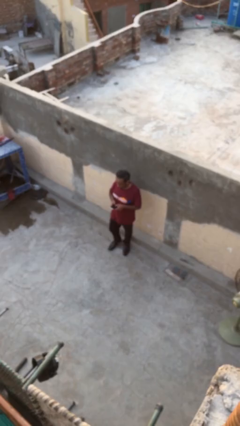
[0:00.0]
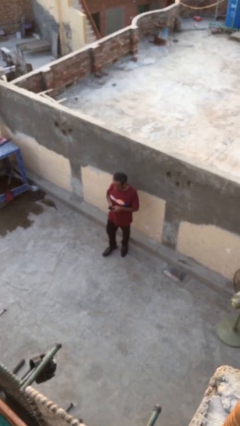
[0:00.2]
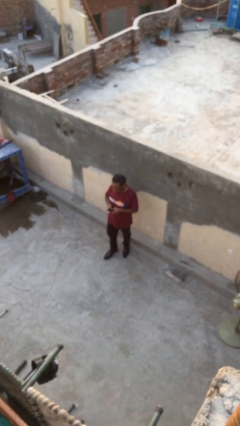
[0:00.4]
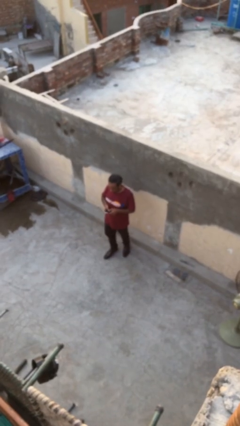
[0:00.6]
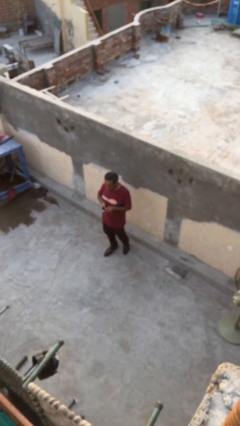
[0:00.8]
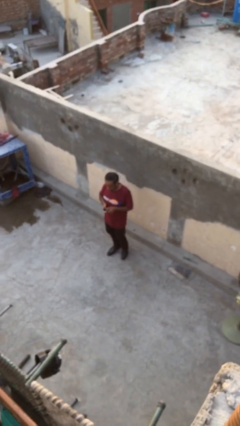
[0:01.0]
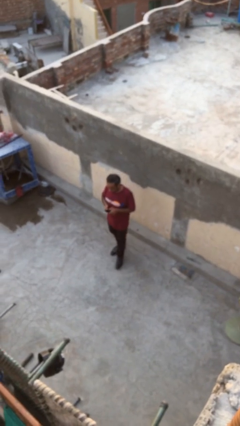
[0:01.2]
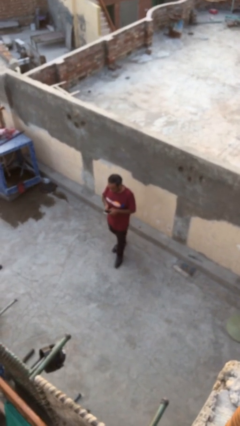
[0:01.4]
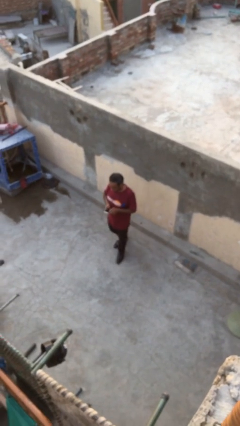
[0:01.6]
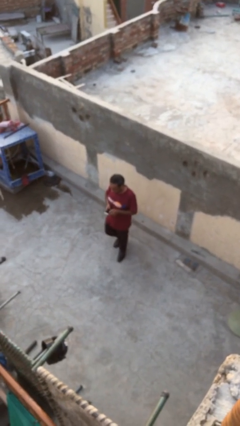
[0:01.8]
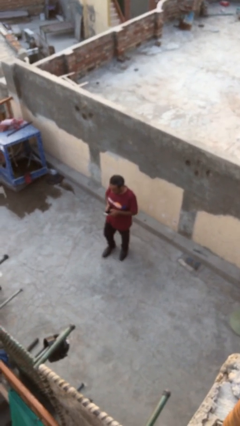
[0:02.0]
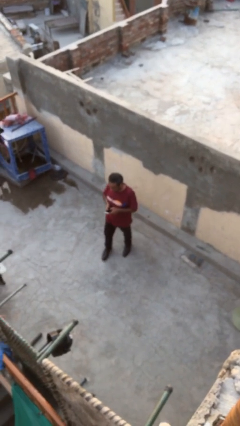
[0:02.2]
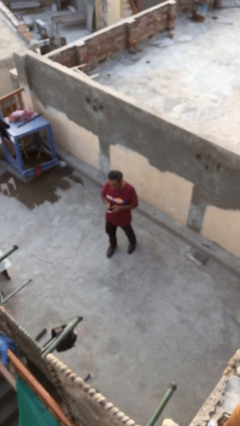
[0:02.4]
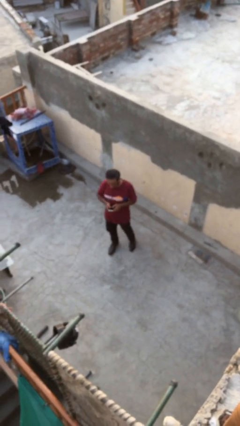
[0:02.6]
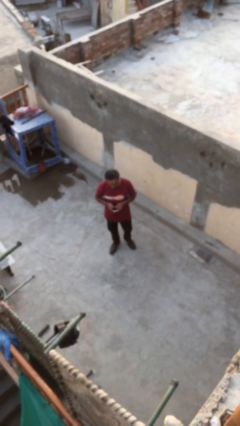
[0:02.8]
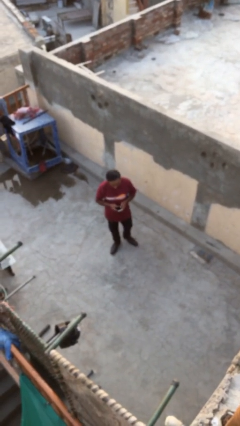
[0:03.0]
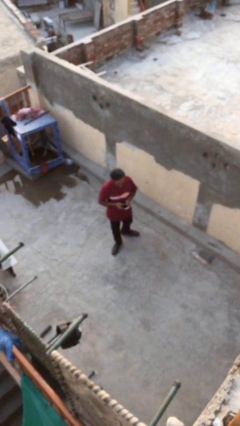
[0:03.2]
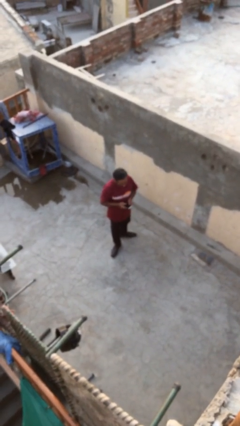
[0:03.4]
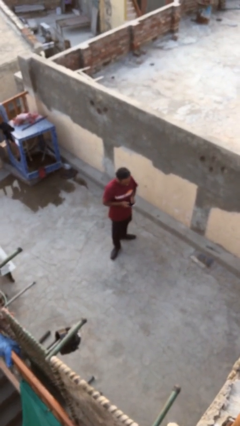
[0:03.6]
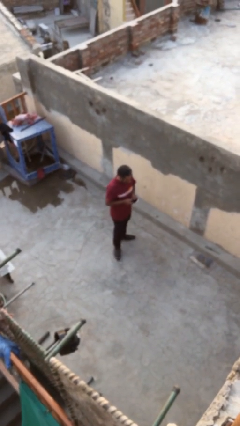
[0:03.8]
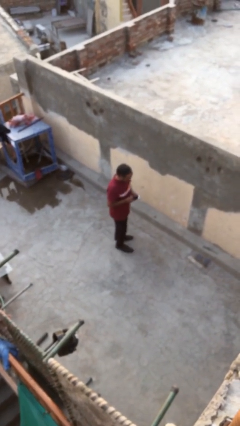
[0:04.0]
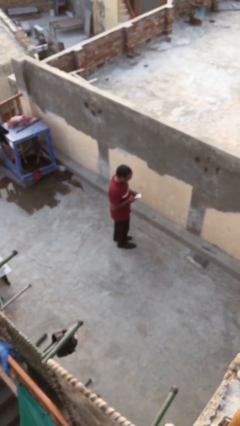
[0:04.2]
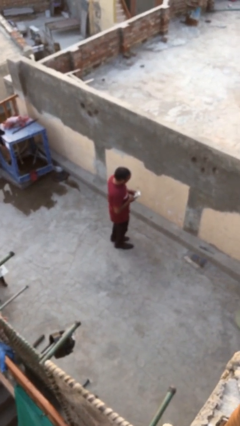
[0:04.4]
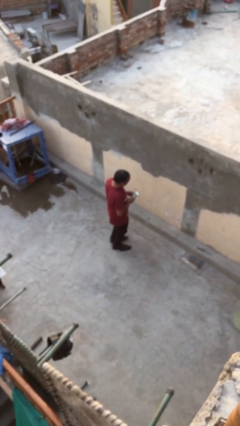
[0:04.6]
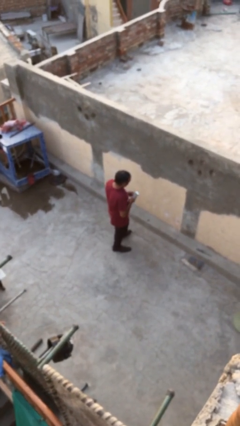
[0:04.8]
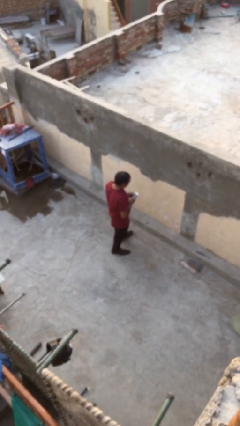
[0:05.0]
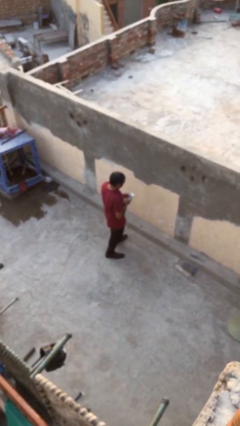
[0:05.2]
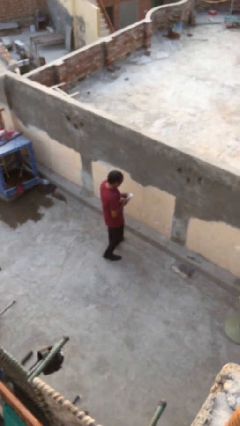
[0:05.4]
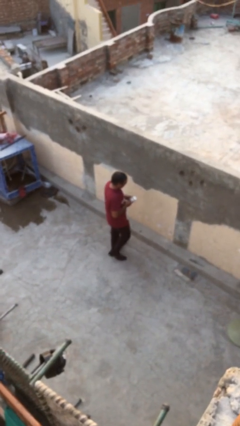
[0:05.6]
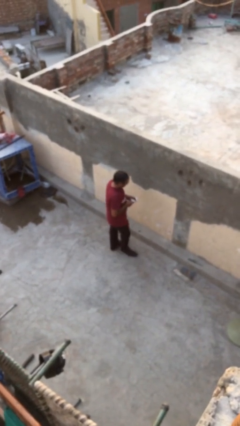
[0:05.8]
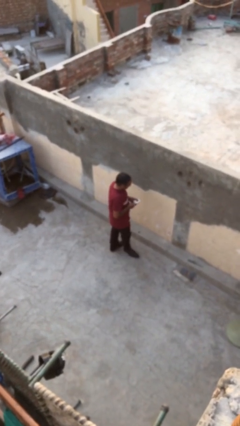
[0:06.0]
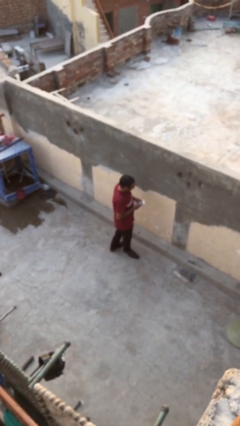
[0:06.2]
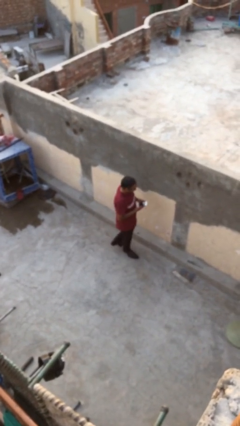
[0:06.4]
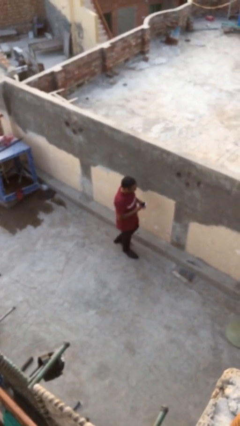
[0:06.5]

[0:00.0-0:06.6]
person texts on phone

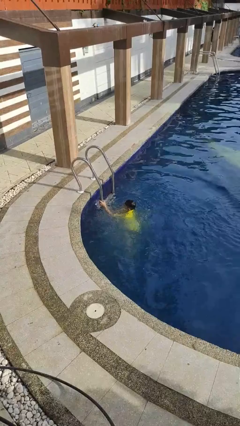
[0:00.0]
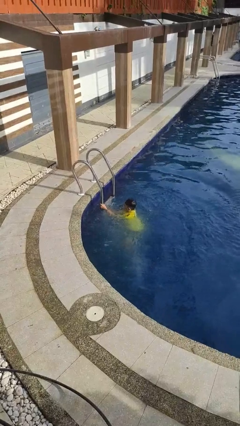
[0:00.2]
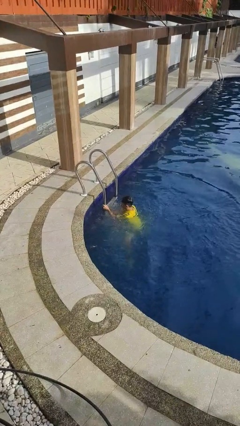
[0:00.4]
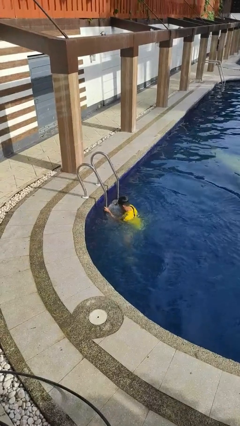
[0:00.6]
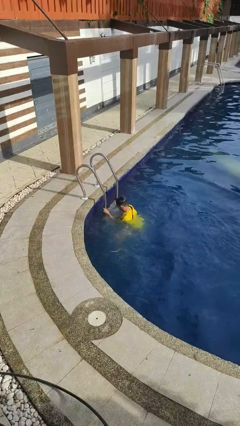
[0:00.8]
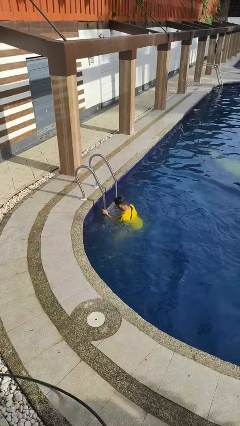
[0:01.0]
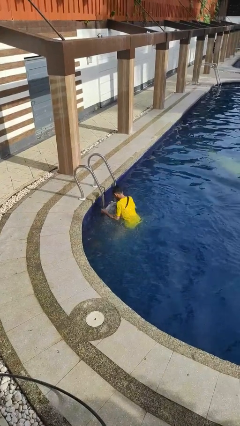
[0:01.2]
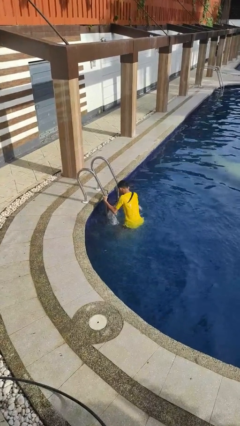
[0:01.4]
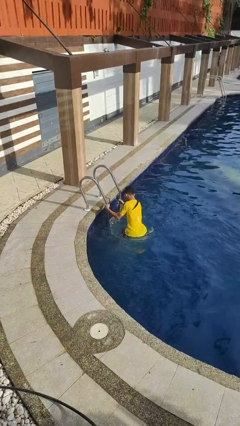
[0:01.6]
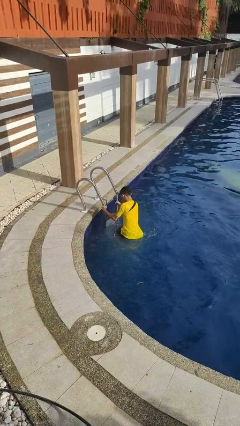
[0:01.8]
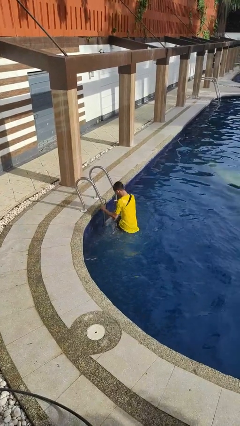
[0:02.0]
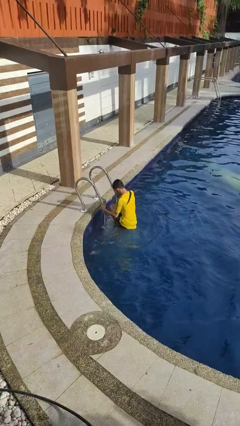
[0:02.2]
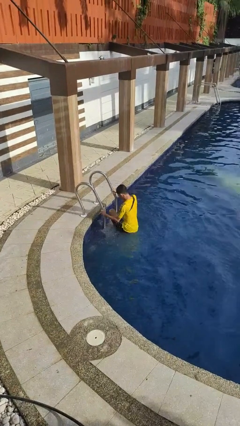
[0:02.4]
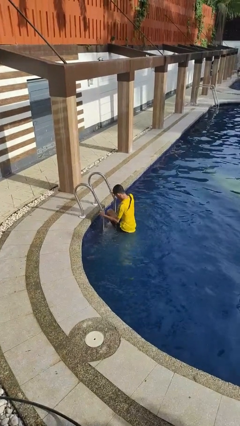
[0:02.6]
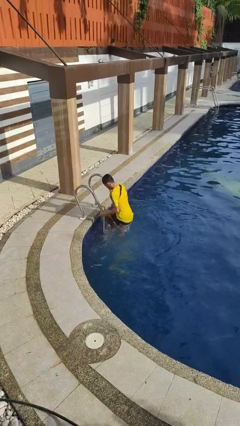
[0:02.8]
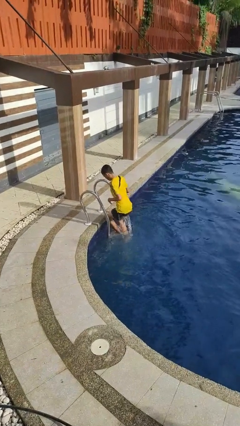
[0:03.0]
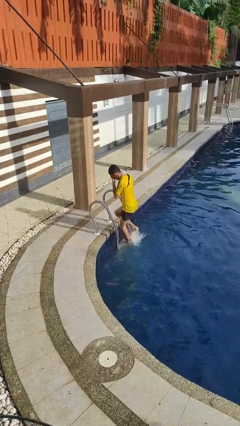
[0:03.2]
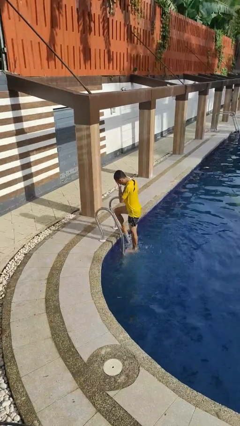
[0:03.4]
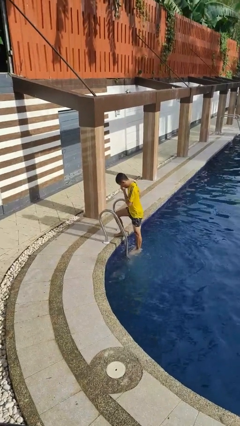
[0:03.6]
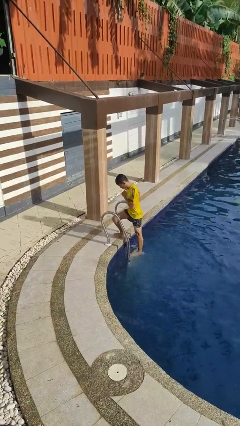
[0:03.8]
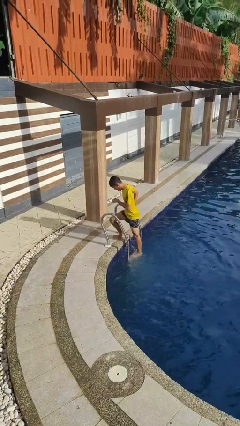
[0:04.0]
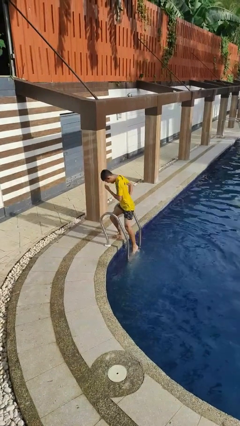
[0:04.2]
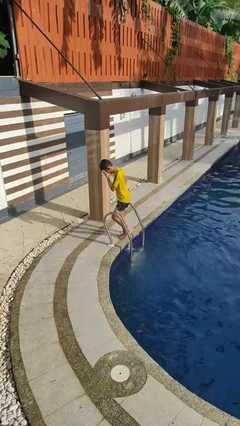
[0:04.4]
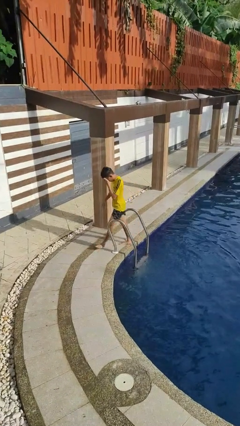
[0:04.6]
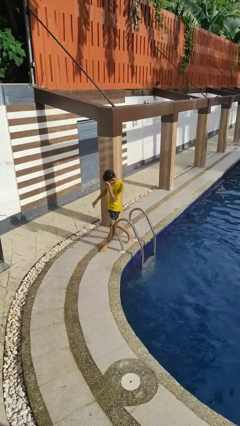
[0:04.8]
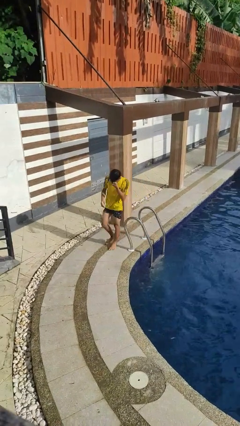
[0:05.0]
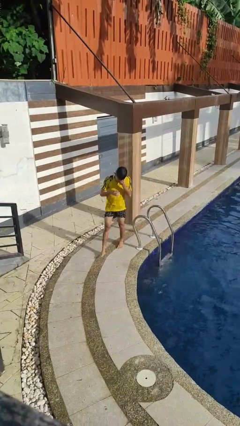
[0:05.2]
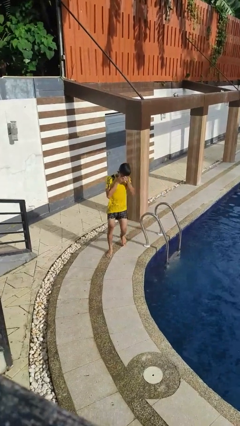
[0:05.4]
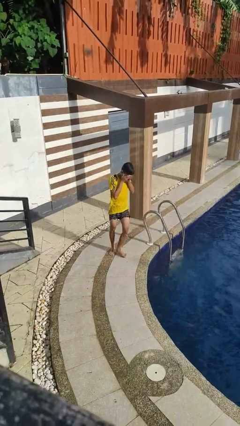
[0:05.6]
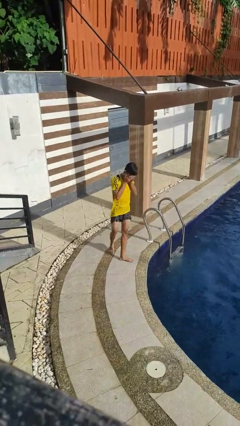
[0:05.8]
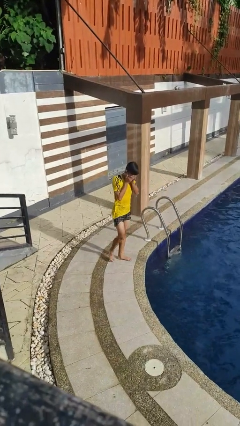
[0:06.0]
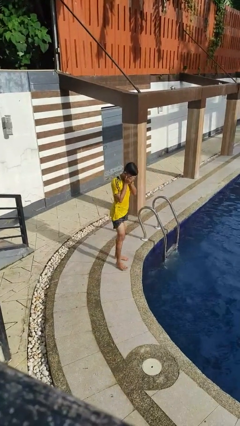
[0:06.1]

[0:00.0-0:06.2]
person exits pool

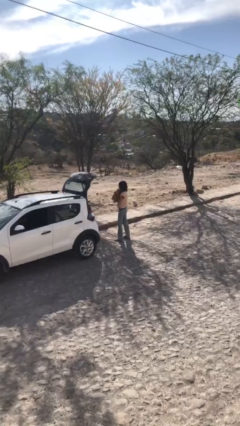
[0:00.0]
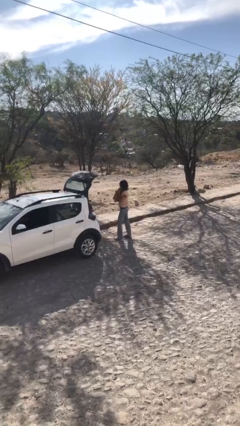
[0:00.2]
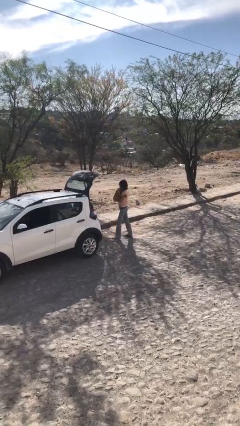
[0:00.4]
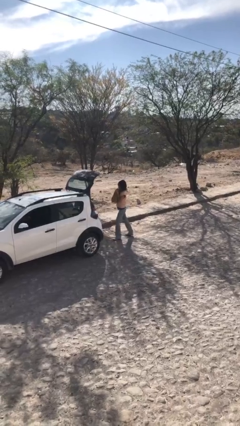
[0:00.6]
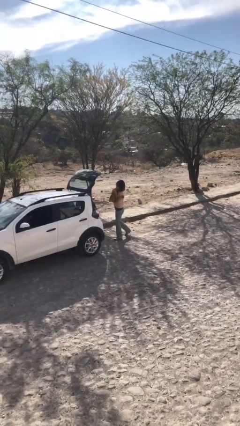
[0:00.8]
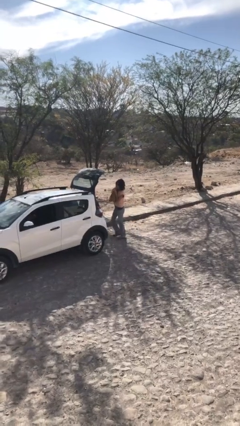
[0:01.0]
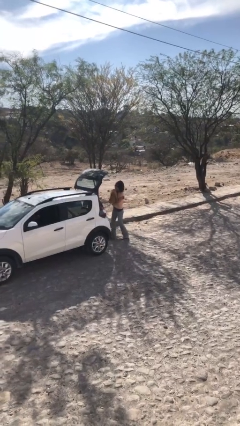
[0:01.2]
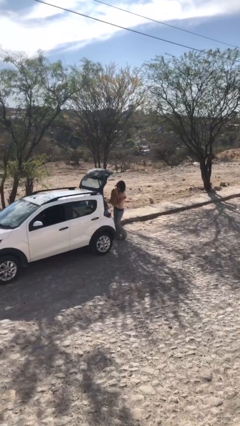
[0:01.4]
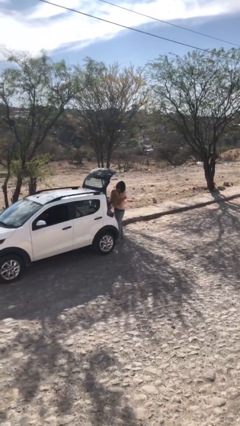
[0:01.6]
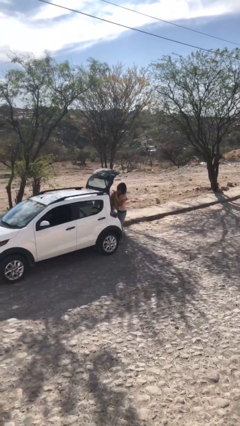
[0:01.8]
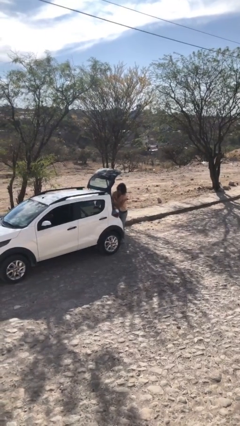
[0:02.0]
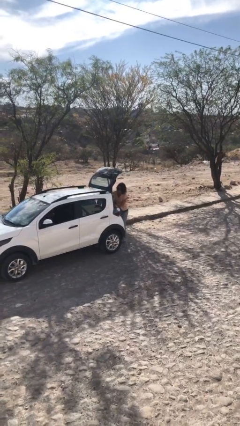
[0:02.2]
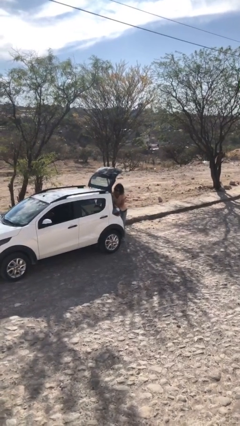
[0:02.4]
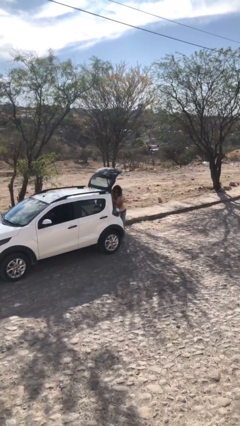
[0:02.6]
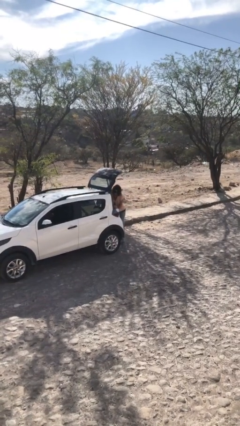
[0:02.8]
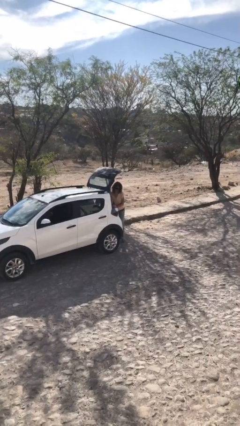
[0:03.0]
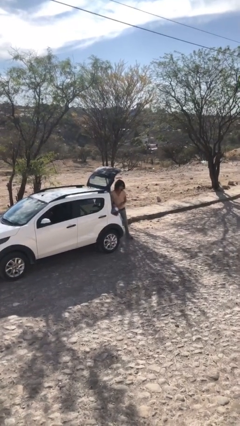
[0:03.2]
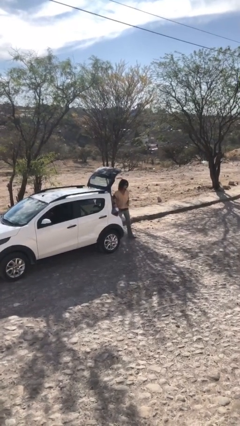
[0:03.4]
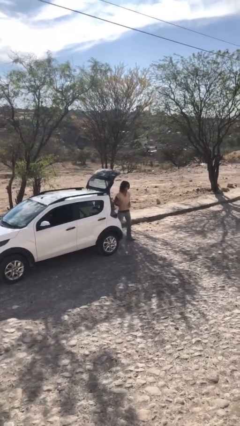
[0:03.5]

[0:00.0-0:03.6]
person loads car

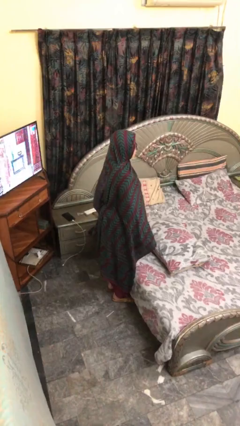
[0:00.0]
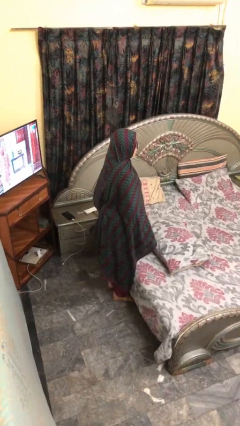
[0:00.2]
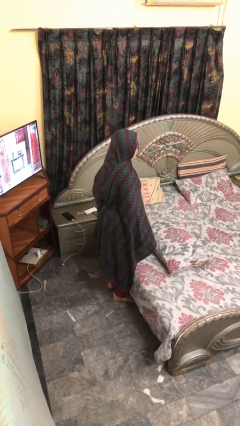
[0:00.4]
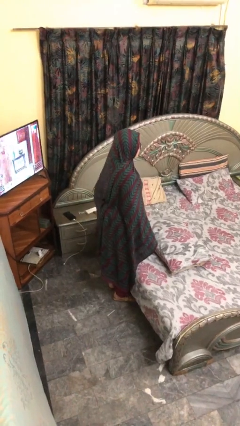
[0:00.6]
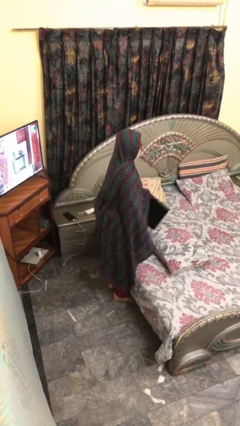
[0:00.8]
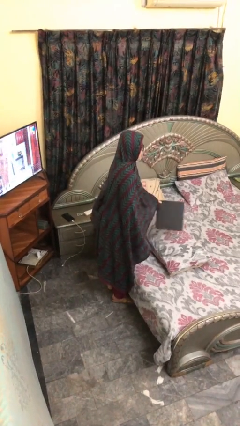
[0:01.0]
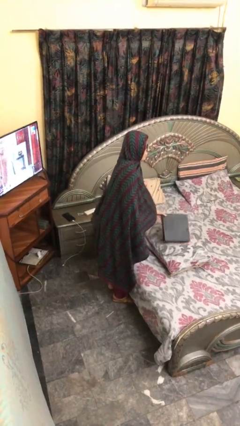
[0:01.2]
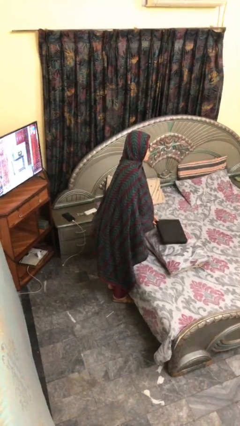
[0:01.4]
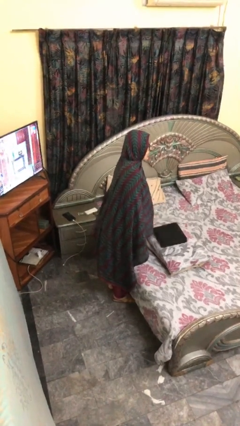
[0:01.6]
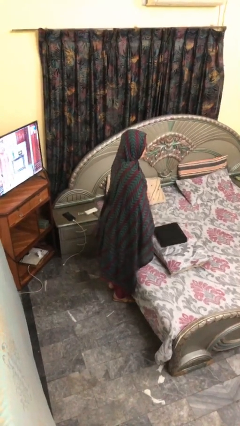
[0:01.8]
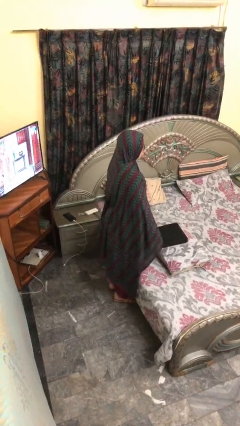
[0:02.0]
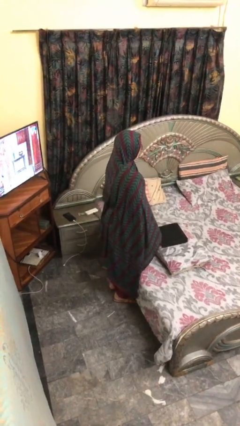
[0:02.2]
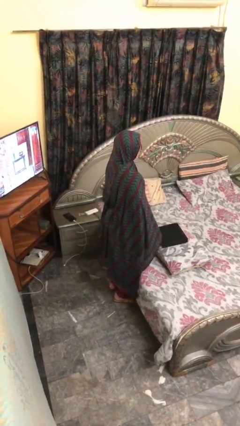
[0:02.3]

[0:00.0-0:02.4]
person puts down object on bed
